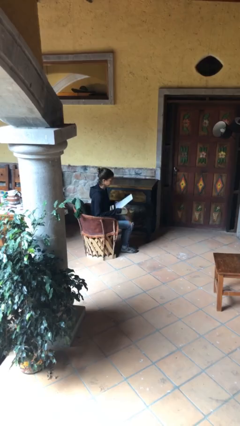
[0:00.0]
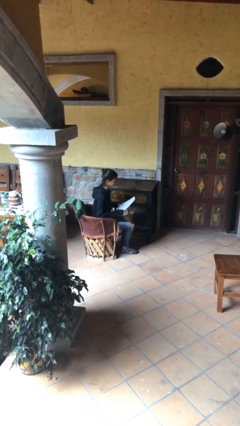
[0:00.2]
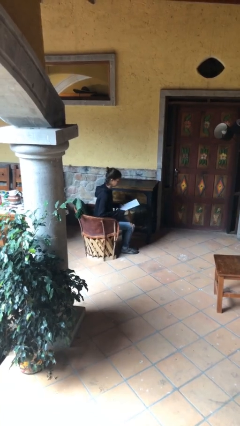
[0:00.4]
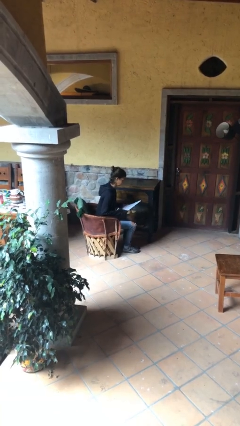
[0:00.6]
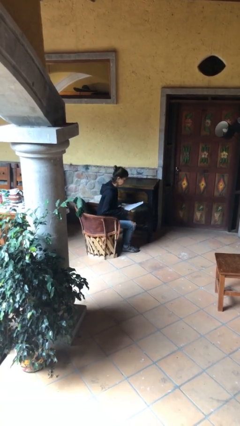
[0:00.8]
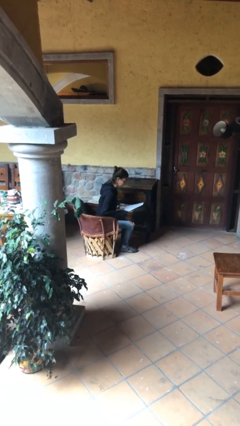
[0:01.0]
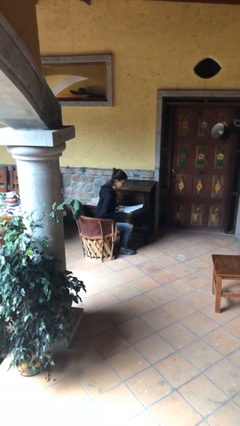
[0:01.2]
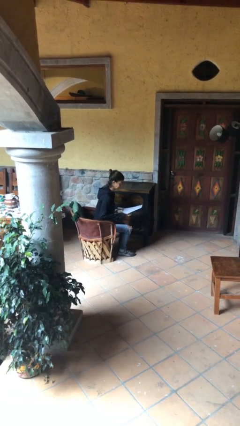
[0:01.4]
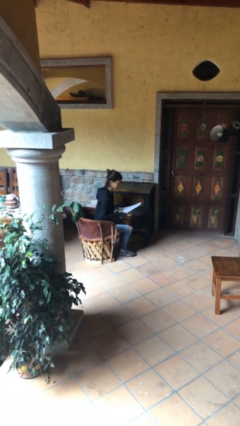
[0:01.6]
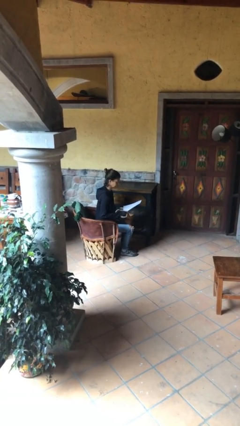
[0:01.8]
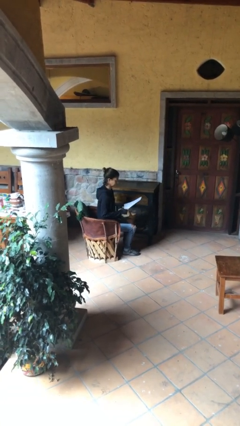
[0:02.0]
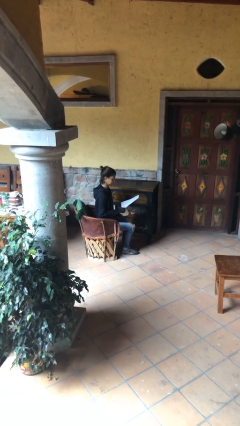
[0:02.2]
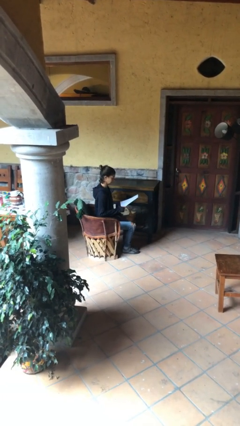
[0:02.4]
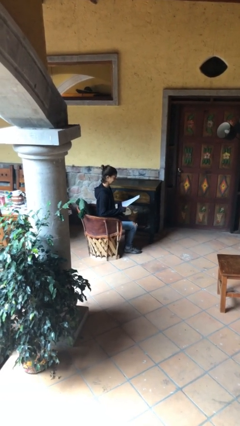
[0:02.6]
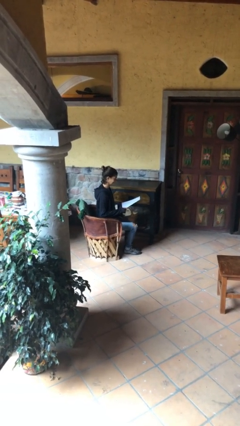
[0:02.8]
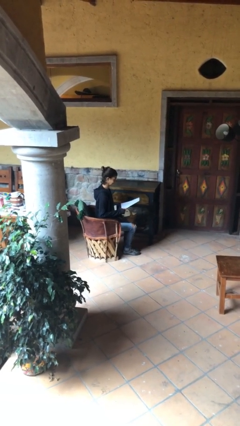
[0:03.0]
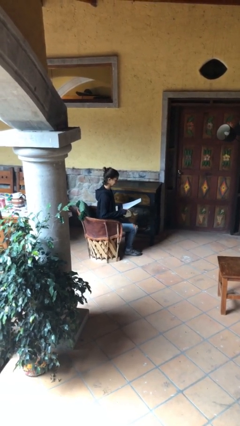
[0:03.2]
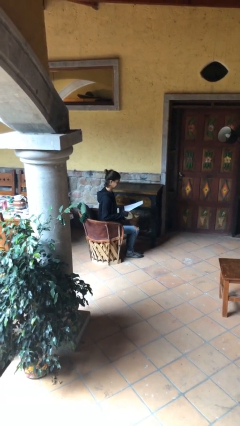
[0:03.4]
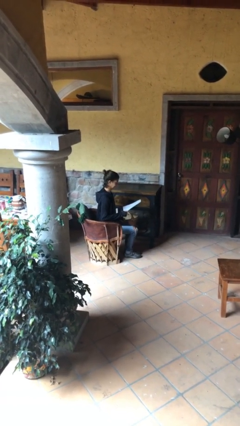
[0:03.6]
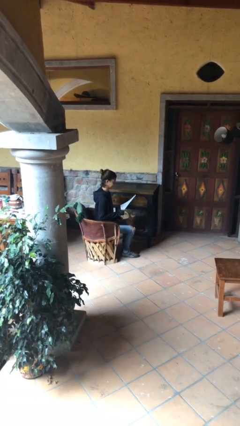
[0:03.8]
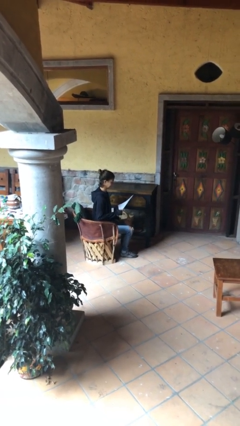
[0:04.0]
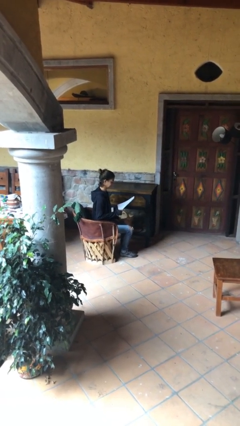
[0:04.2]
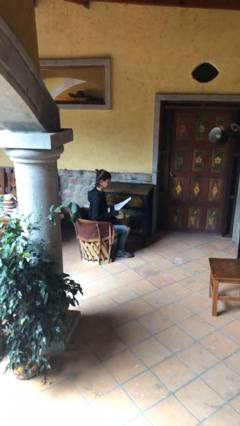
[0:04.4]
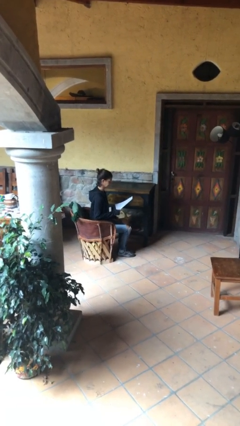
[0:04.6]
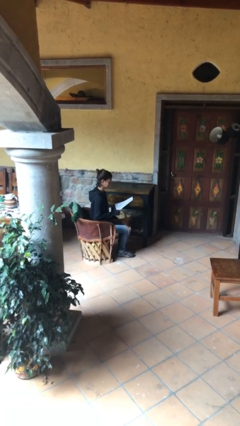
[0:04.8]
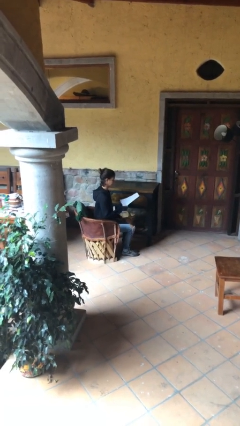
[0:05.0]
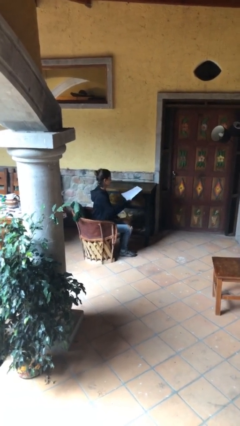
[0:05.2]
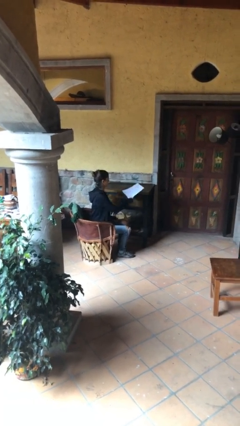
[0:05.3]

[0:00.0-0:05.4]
person reads document

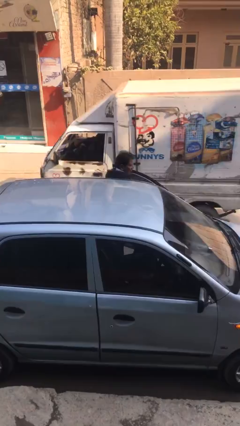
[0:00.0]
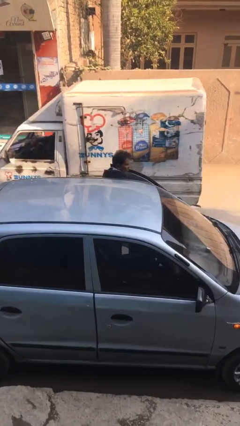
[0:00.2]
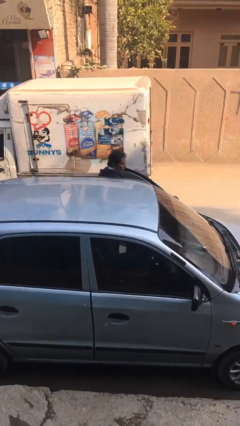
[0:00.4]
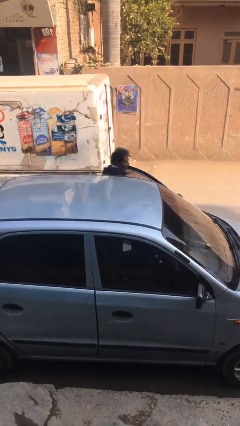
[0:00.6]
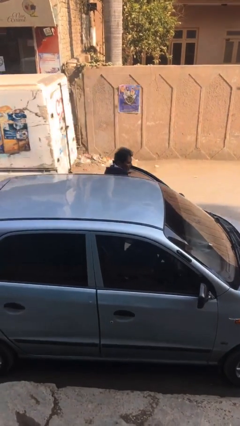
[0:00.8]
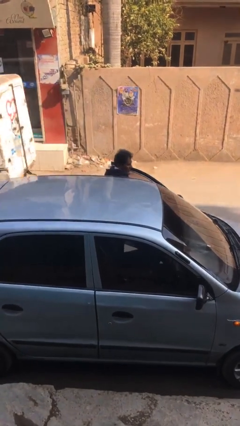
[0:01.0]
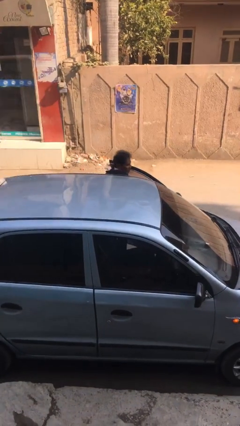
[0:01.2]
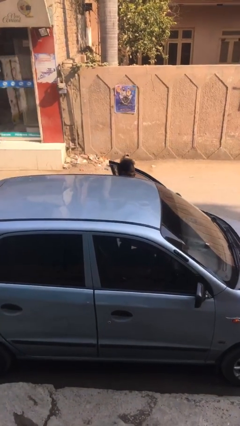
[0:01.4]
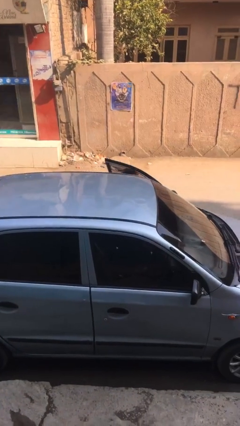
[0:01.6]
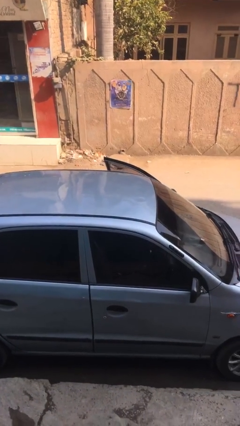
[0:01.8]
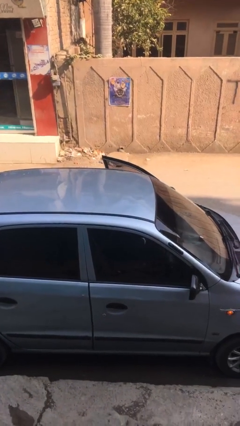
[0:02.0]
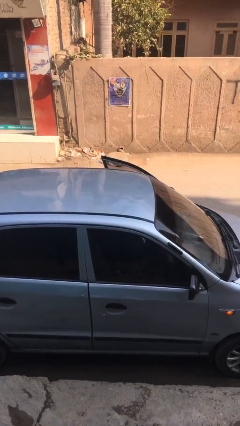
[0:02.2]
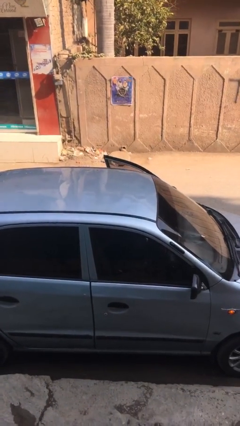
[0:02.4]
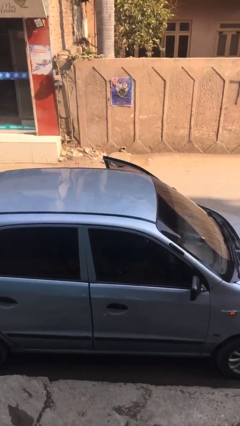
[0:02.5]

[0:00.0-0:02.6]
person enters car

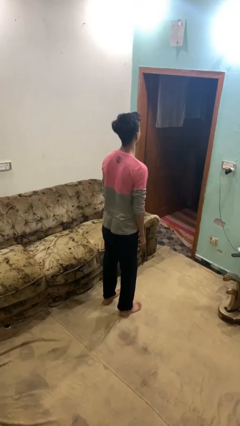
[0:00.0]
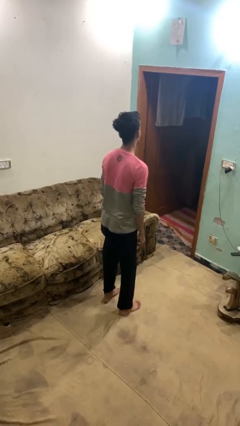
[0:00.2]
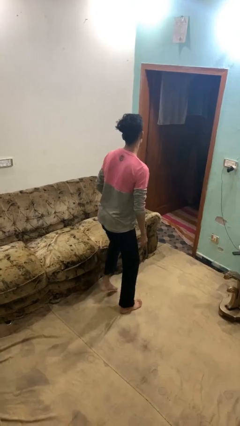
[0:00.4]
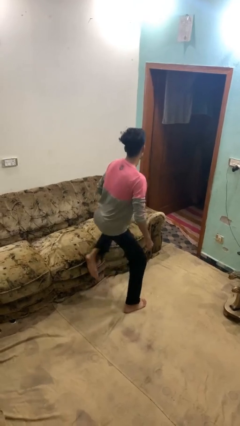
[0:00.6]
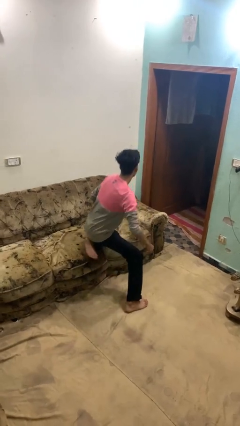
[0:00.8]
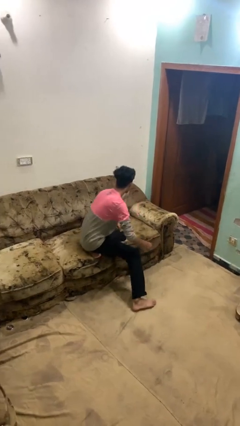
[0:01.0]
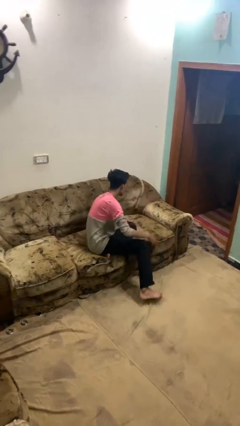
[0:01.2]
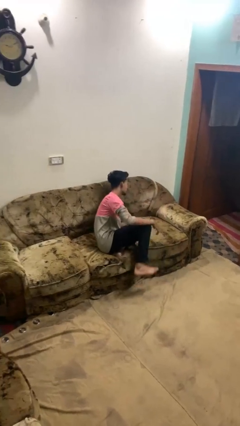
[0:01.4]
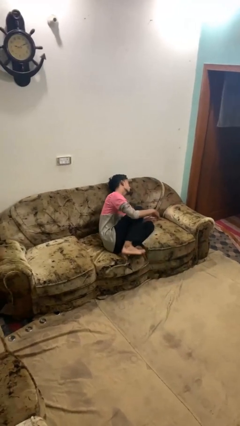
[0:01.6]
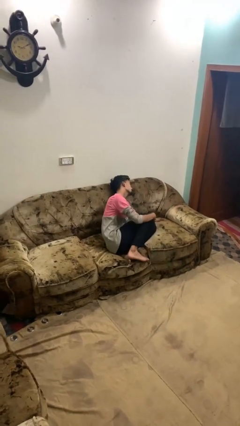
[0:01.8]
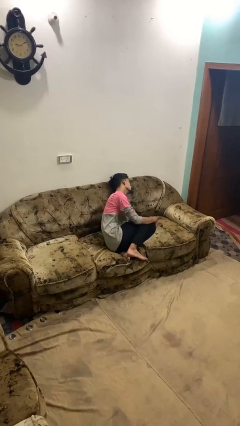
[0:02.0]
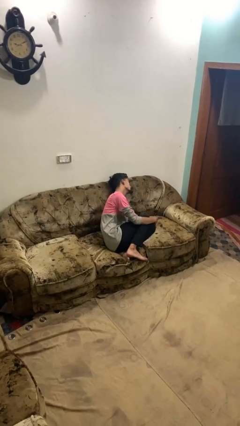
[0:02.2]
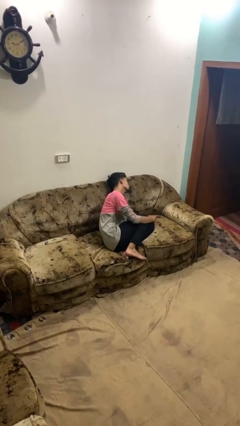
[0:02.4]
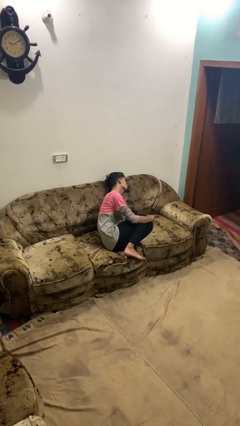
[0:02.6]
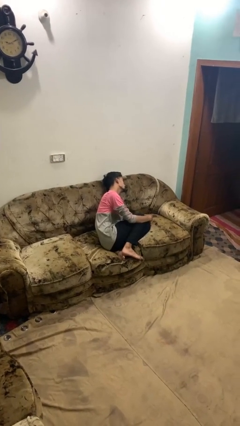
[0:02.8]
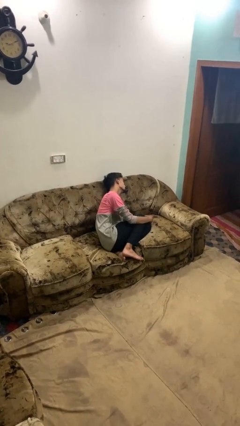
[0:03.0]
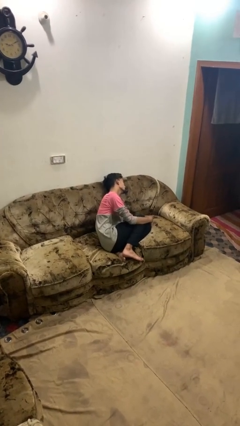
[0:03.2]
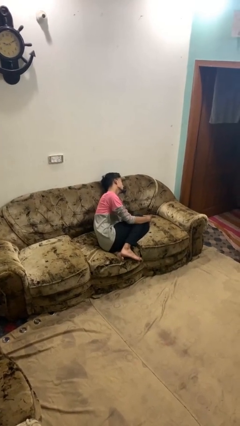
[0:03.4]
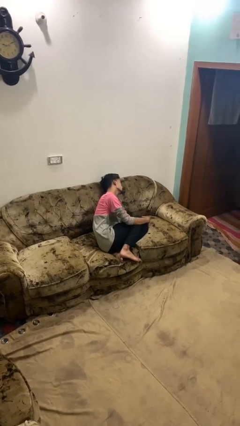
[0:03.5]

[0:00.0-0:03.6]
person lies down on couch

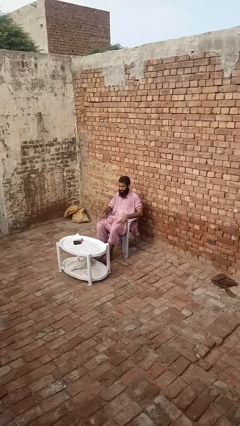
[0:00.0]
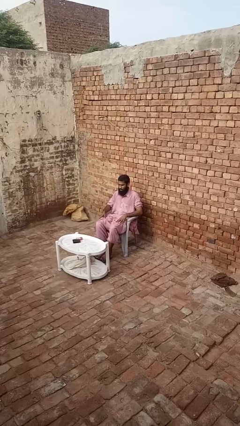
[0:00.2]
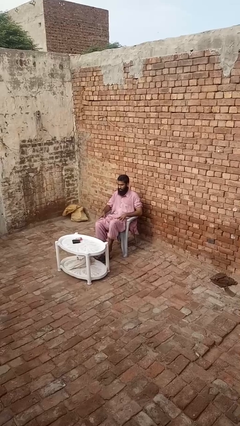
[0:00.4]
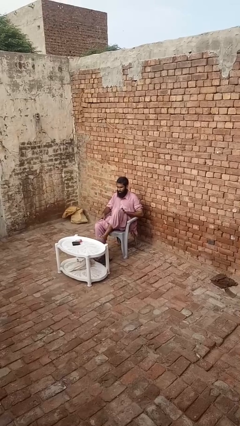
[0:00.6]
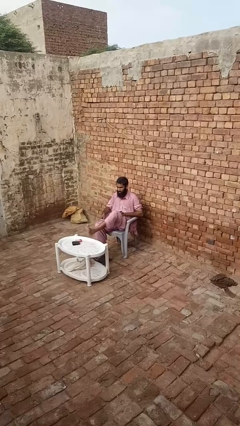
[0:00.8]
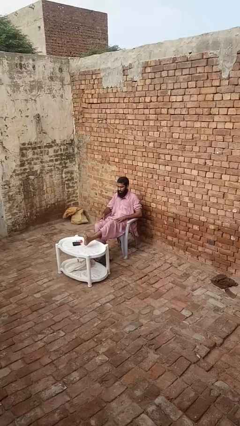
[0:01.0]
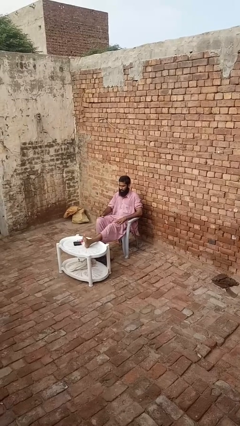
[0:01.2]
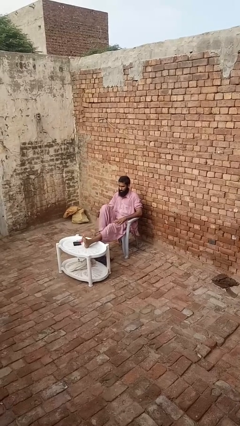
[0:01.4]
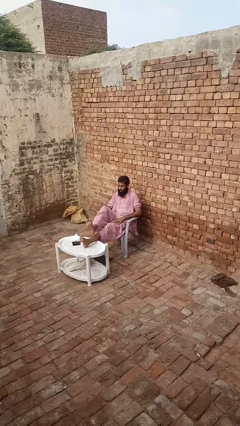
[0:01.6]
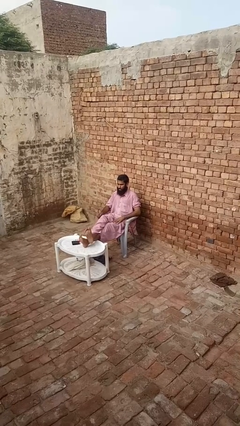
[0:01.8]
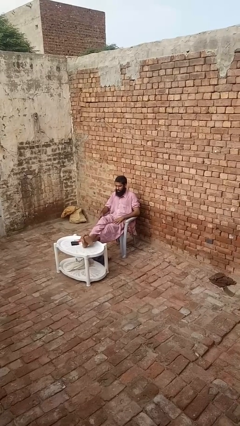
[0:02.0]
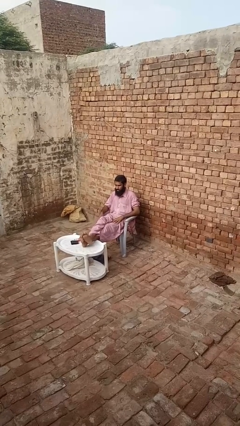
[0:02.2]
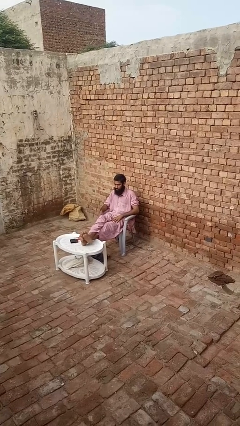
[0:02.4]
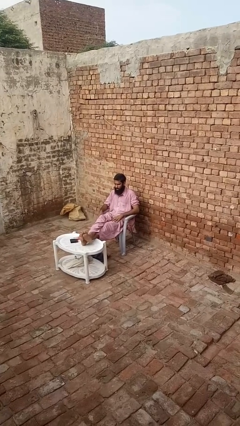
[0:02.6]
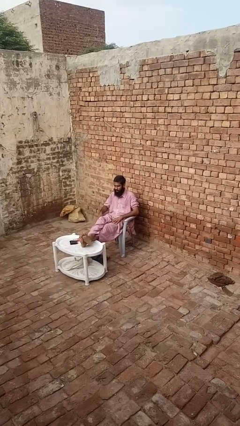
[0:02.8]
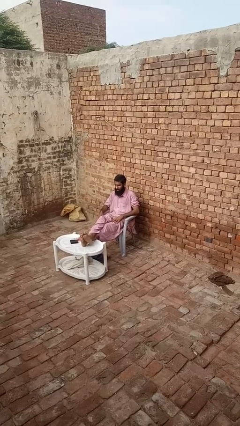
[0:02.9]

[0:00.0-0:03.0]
person puts feet up

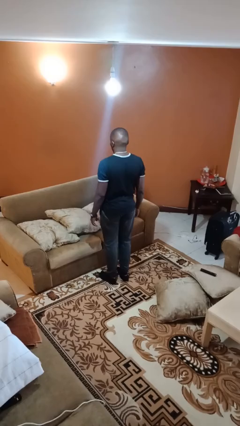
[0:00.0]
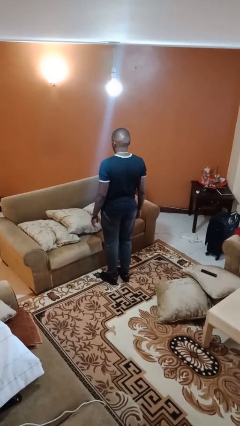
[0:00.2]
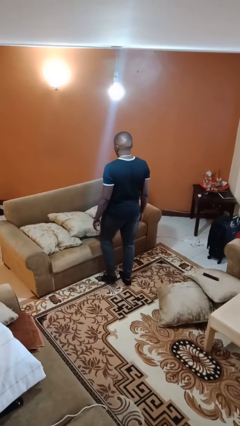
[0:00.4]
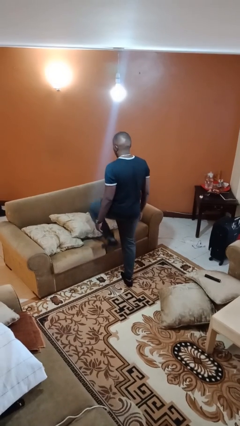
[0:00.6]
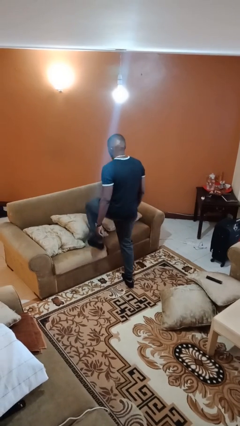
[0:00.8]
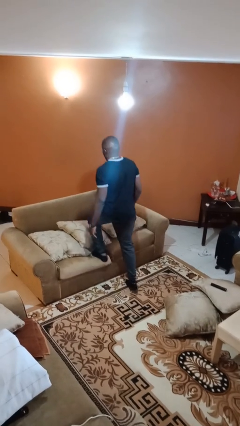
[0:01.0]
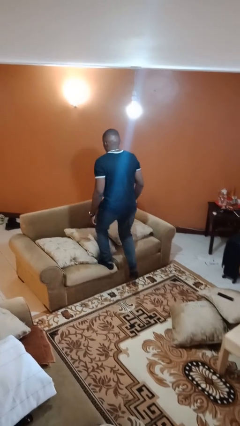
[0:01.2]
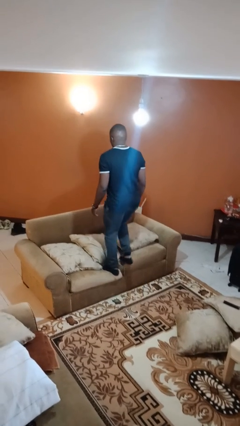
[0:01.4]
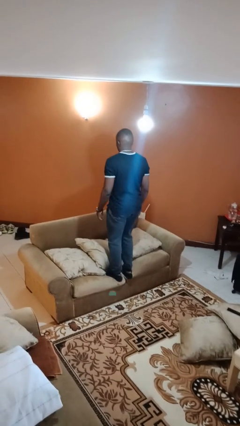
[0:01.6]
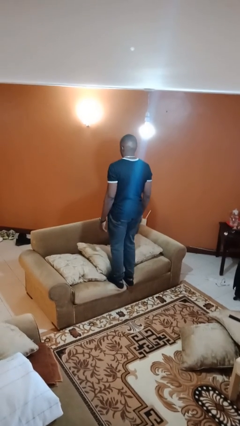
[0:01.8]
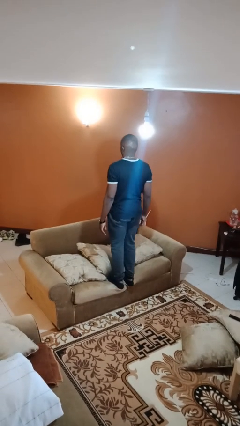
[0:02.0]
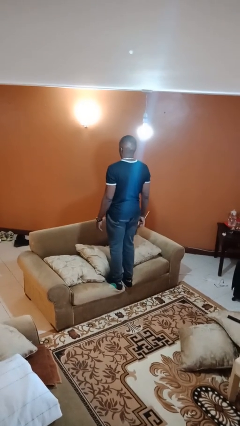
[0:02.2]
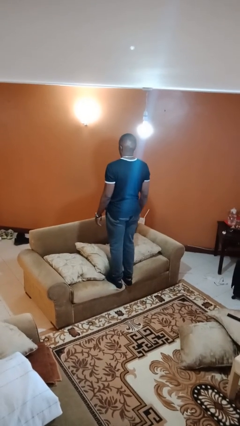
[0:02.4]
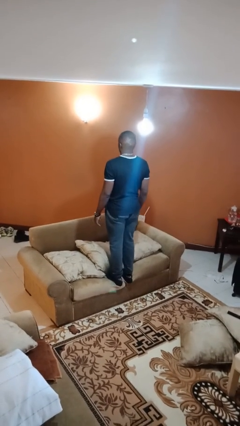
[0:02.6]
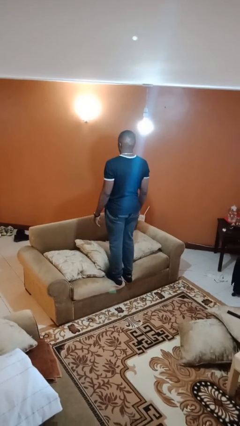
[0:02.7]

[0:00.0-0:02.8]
person climbs on couch
